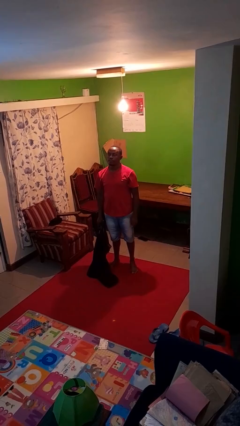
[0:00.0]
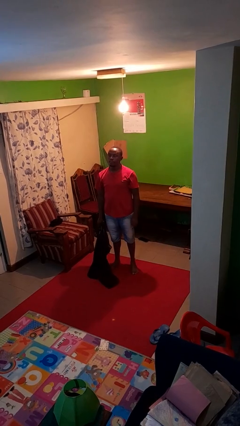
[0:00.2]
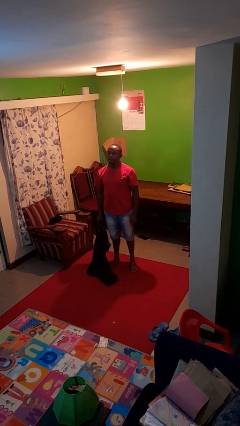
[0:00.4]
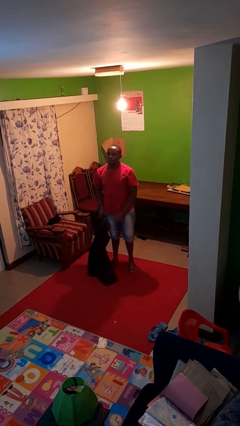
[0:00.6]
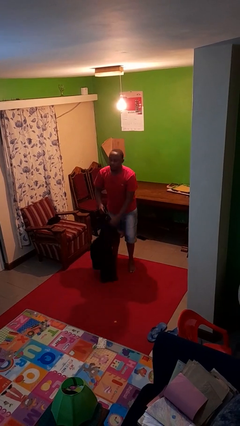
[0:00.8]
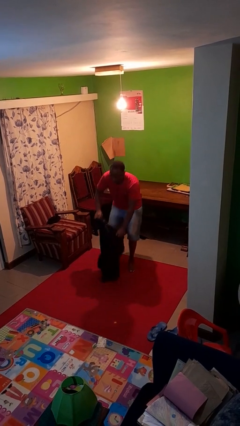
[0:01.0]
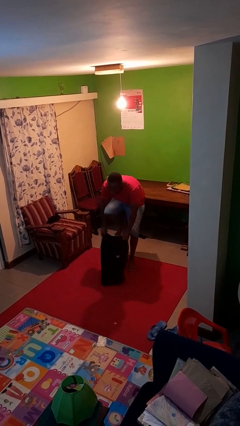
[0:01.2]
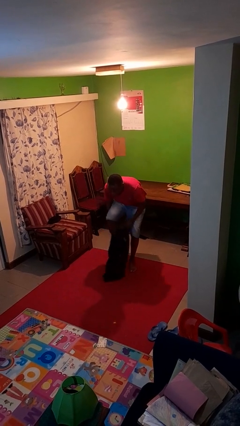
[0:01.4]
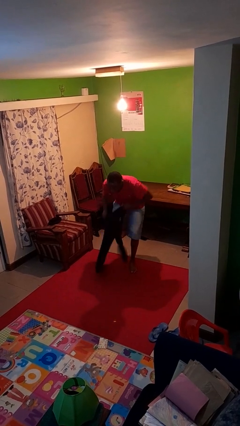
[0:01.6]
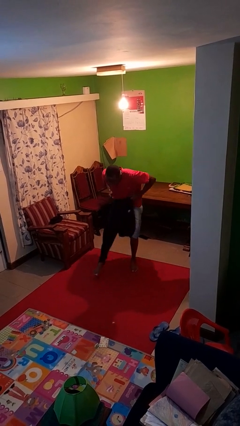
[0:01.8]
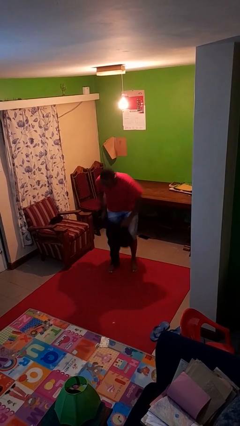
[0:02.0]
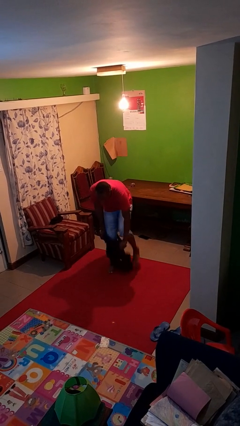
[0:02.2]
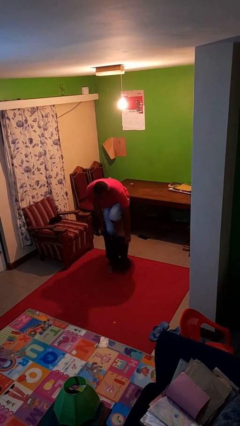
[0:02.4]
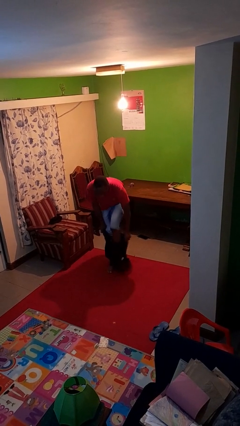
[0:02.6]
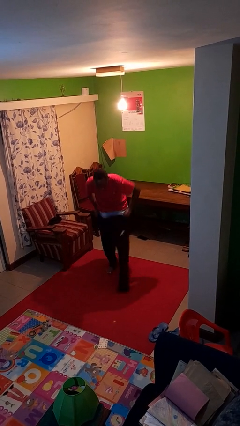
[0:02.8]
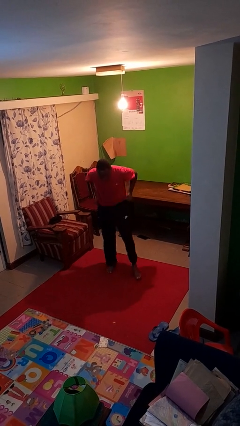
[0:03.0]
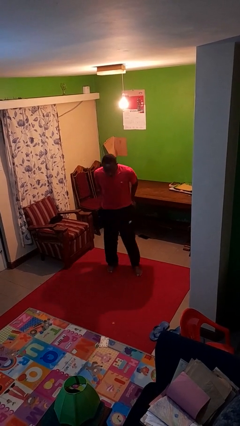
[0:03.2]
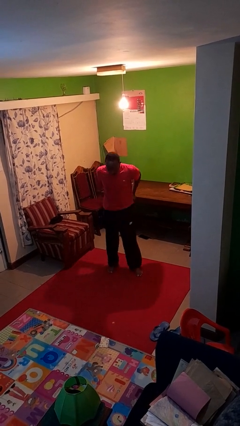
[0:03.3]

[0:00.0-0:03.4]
person puts on pants

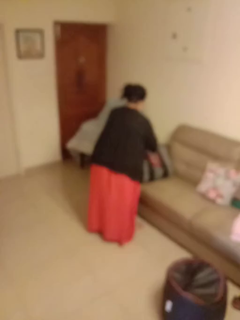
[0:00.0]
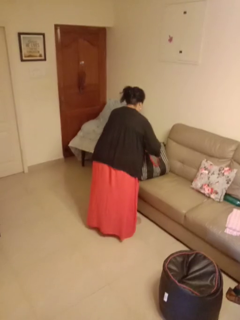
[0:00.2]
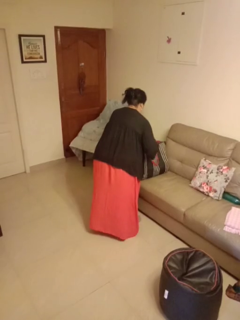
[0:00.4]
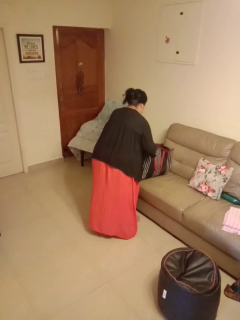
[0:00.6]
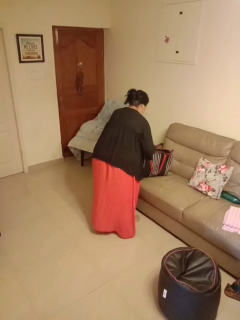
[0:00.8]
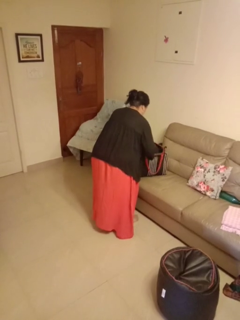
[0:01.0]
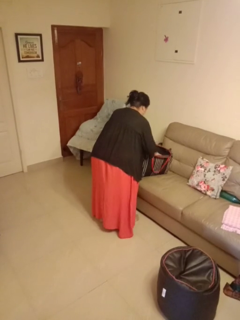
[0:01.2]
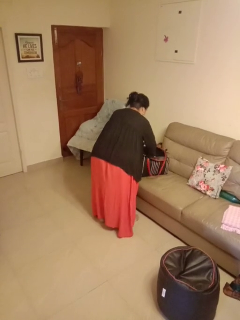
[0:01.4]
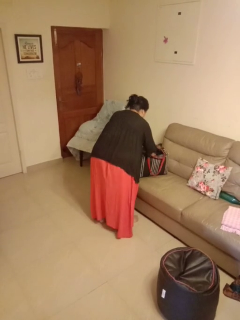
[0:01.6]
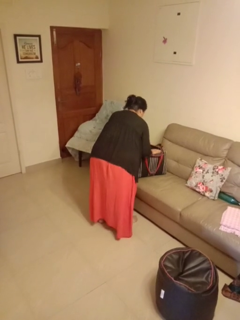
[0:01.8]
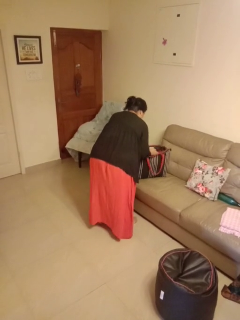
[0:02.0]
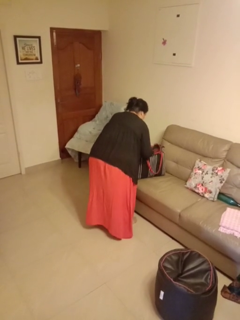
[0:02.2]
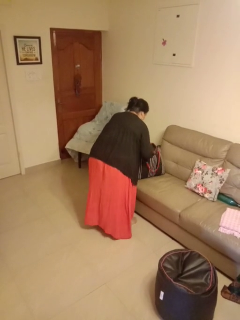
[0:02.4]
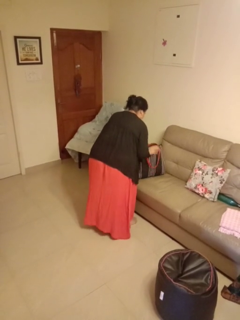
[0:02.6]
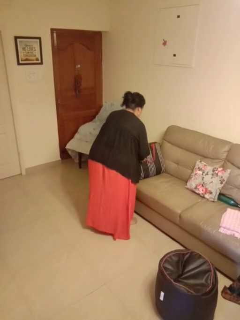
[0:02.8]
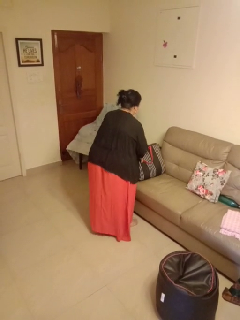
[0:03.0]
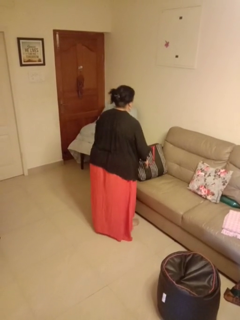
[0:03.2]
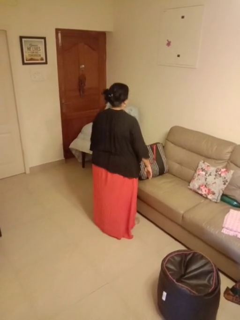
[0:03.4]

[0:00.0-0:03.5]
person searches in bag

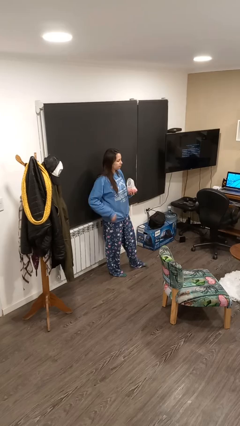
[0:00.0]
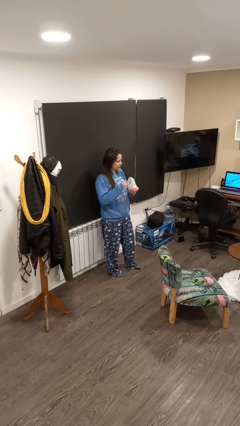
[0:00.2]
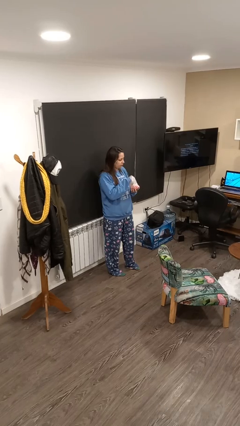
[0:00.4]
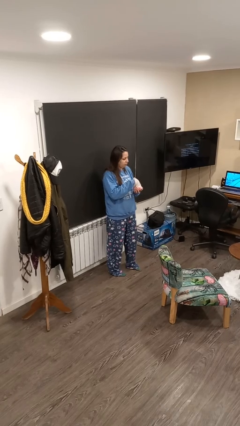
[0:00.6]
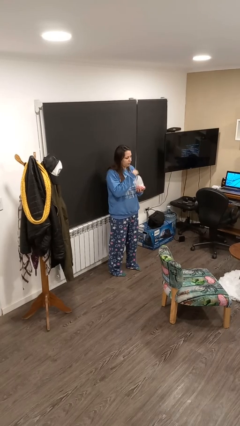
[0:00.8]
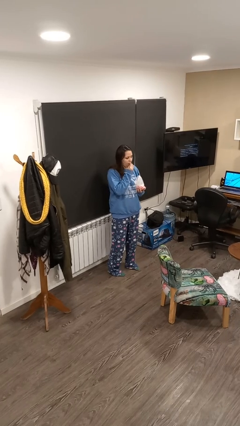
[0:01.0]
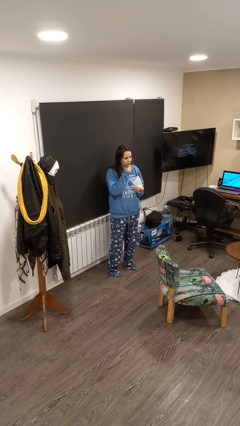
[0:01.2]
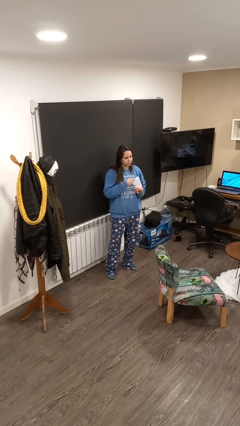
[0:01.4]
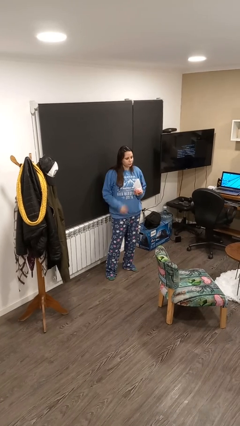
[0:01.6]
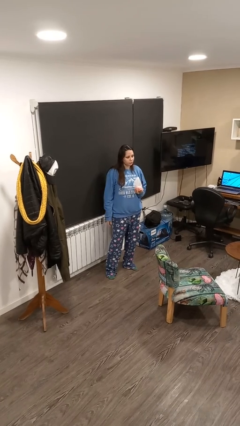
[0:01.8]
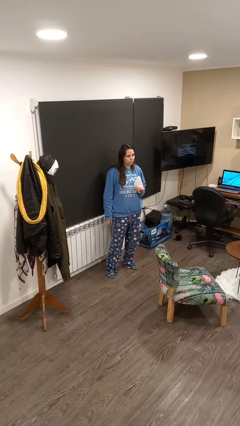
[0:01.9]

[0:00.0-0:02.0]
person eats snack from bag

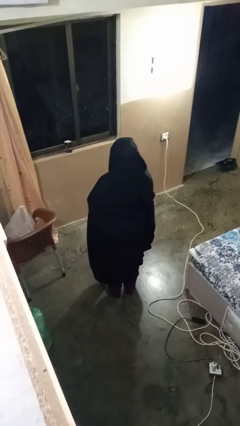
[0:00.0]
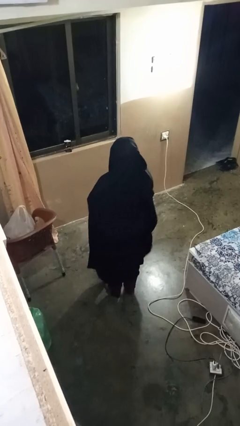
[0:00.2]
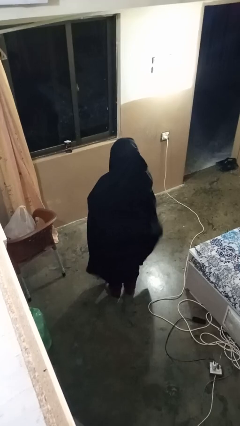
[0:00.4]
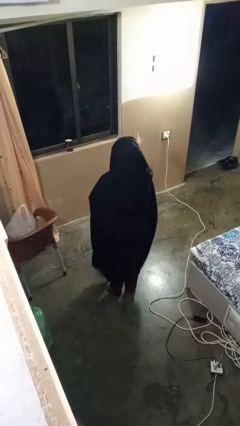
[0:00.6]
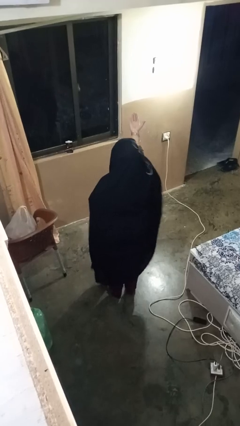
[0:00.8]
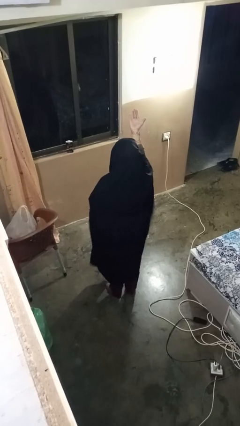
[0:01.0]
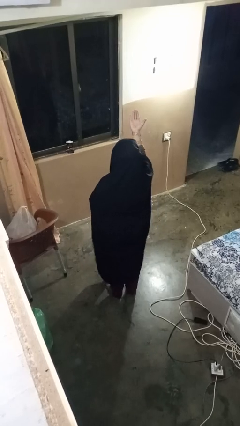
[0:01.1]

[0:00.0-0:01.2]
person gestures swipe up

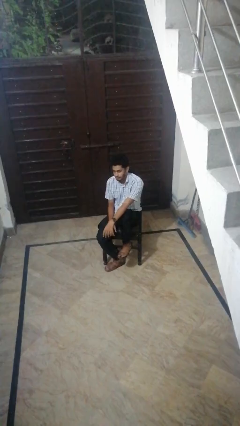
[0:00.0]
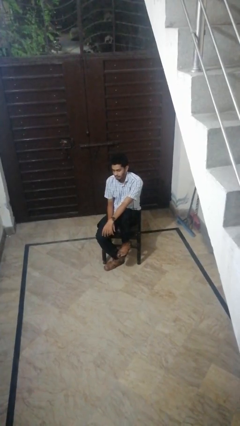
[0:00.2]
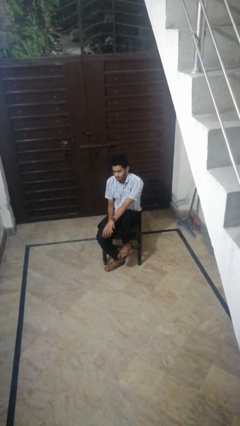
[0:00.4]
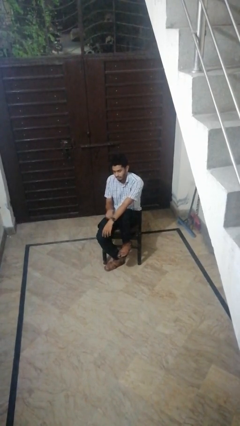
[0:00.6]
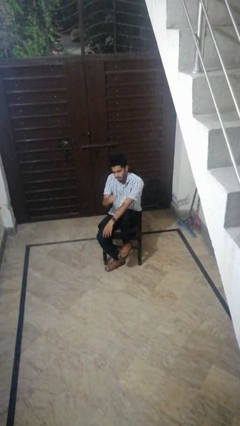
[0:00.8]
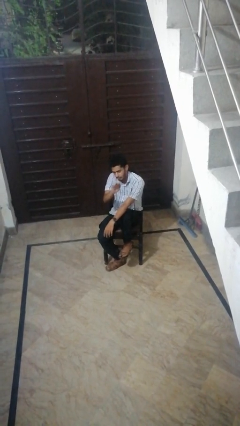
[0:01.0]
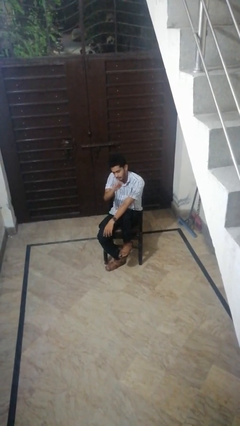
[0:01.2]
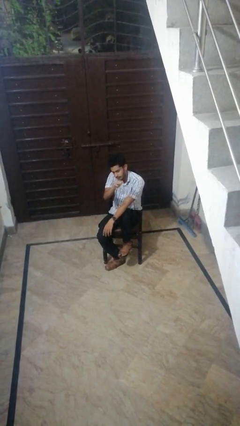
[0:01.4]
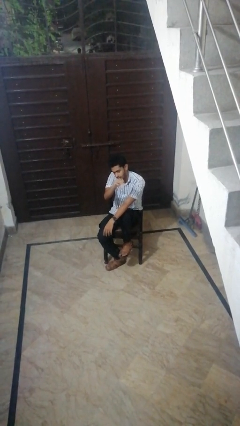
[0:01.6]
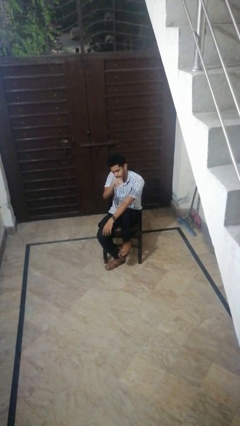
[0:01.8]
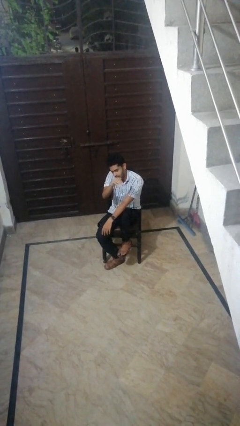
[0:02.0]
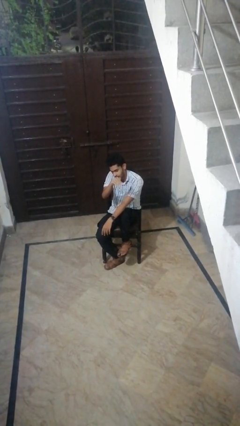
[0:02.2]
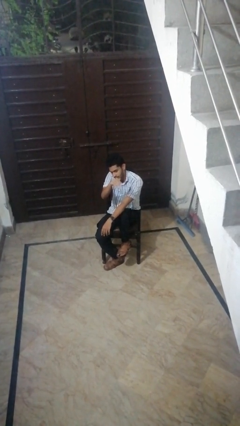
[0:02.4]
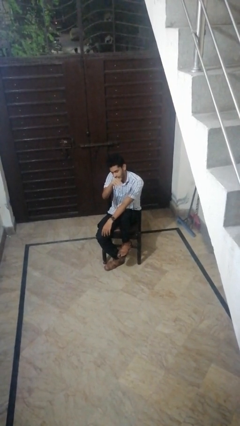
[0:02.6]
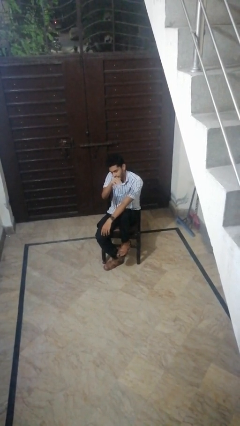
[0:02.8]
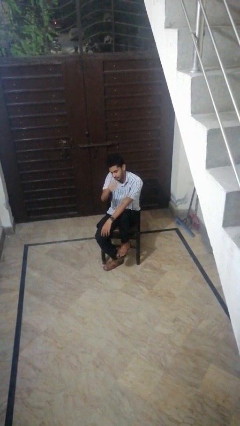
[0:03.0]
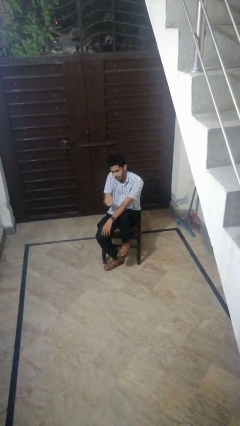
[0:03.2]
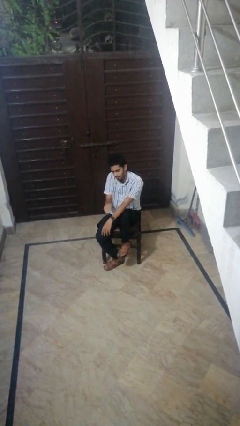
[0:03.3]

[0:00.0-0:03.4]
person gestures come here

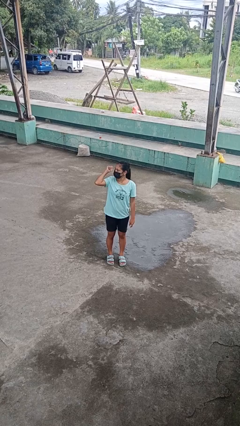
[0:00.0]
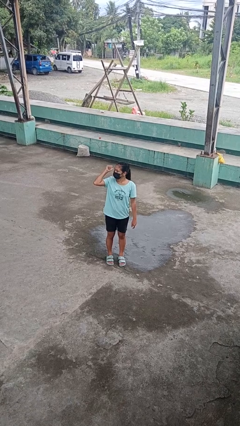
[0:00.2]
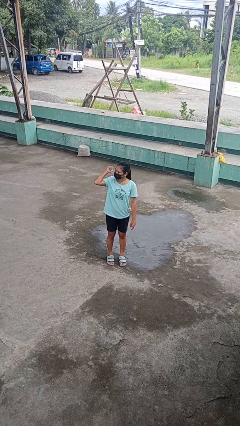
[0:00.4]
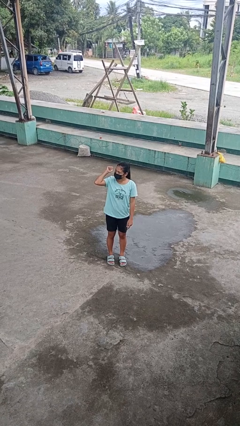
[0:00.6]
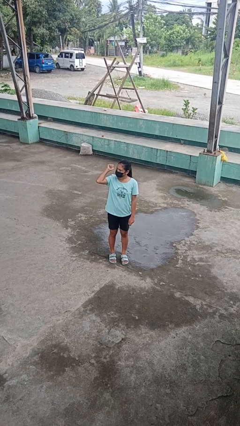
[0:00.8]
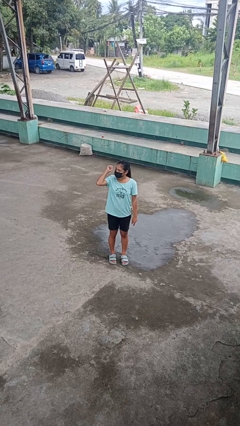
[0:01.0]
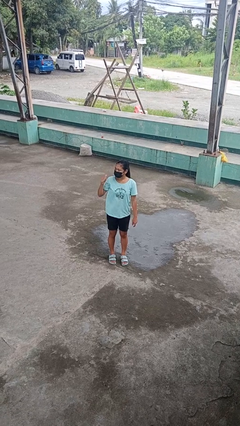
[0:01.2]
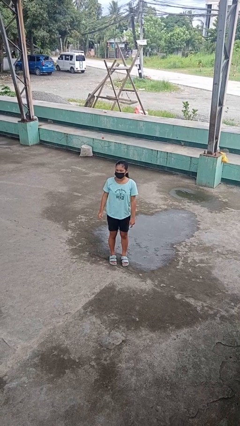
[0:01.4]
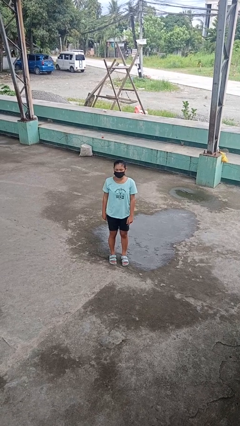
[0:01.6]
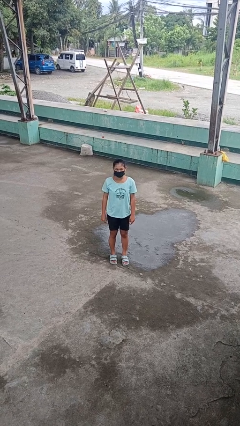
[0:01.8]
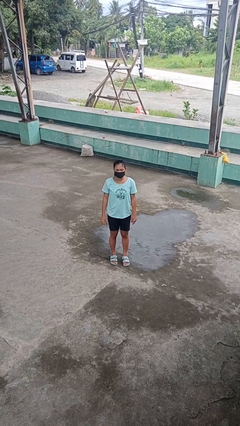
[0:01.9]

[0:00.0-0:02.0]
person gestures behind me

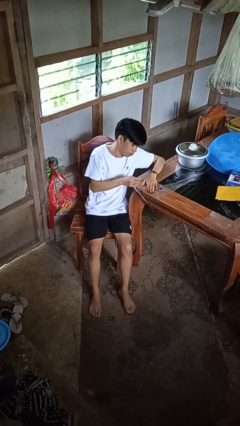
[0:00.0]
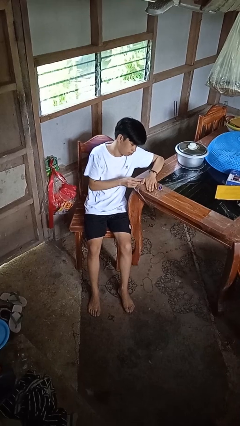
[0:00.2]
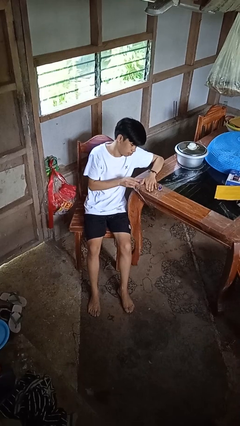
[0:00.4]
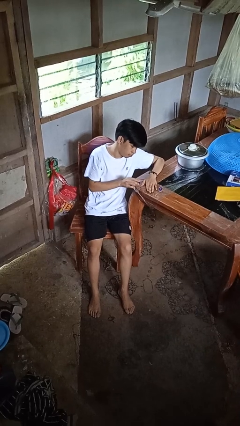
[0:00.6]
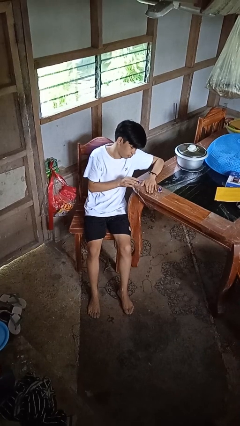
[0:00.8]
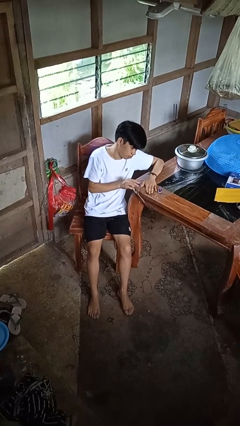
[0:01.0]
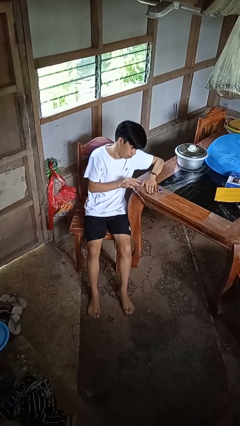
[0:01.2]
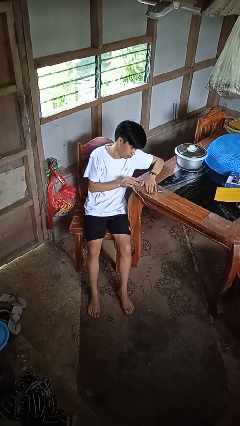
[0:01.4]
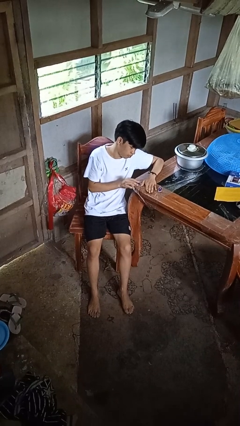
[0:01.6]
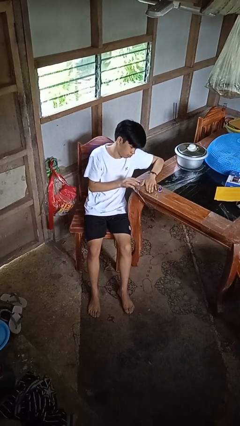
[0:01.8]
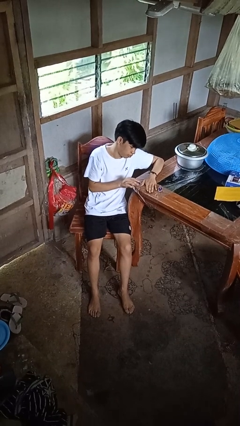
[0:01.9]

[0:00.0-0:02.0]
person paints fingernails

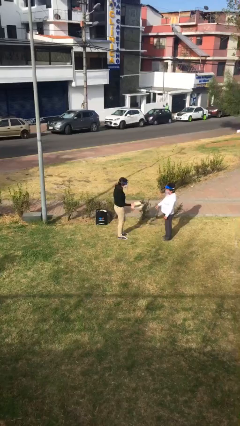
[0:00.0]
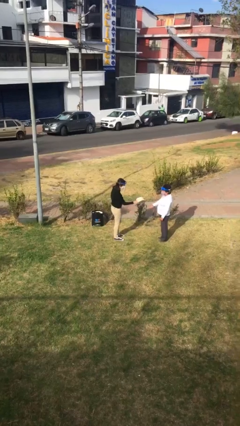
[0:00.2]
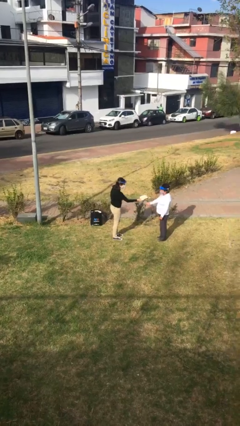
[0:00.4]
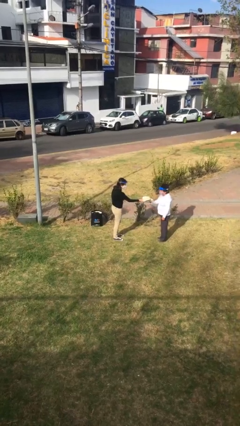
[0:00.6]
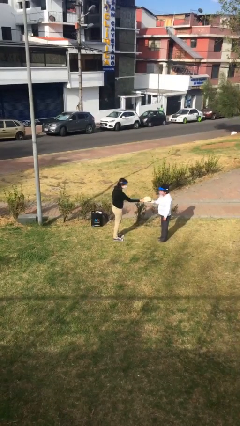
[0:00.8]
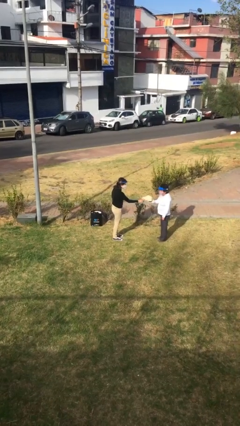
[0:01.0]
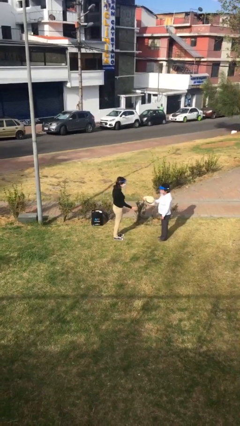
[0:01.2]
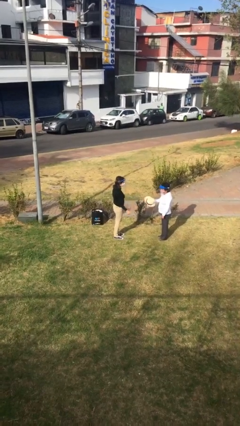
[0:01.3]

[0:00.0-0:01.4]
person transfers object to person
